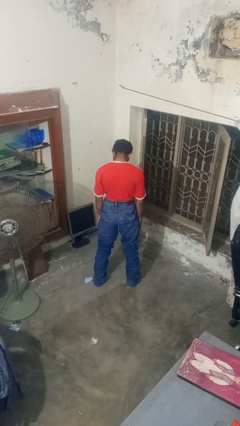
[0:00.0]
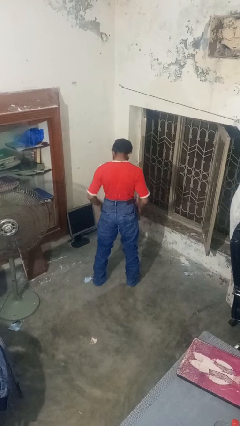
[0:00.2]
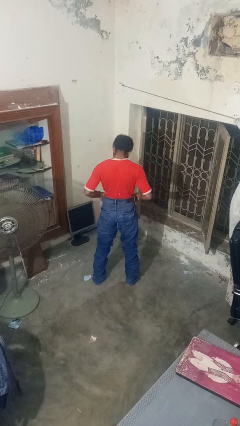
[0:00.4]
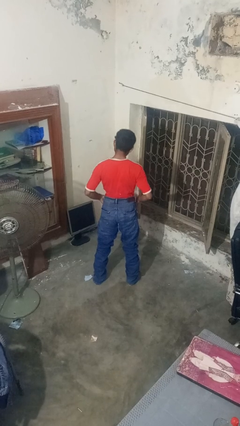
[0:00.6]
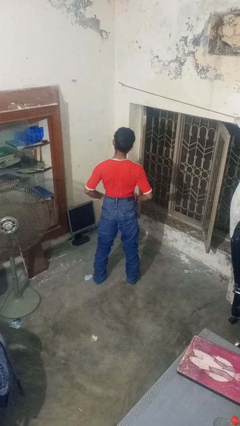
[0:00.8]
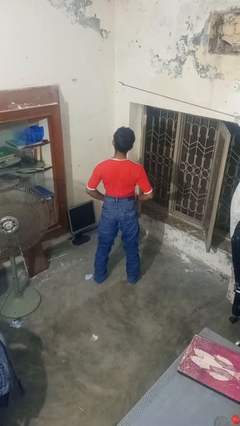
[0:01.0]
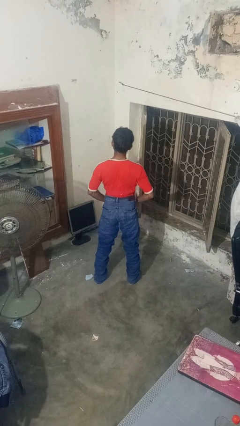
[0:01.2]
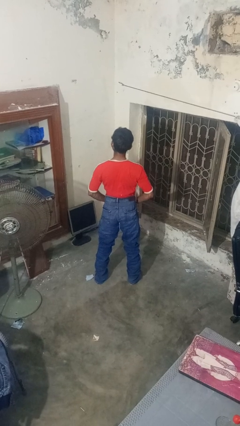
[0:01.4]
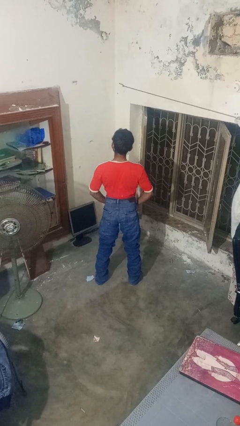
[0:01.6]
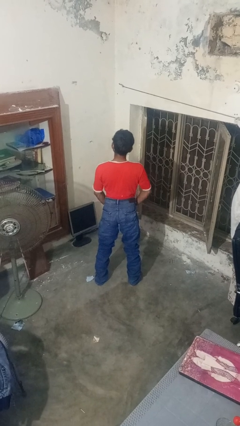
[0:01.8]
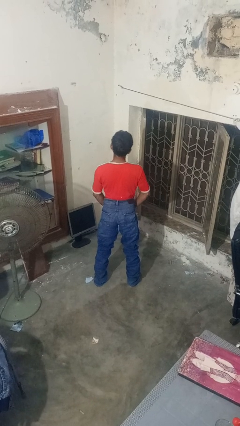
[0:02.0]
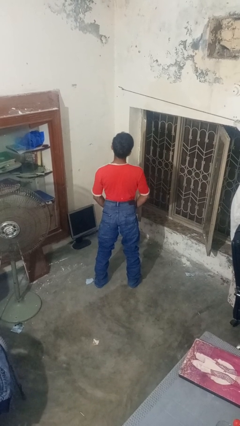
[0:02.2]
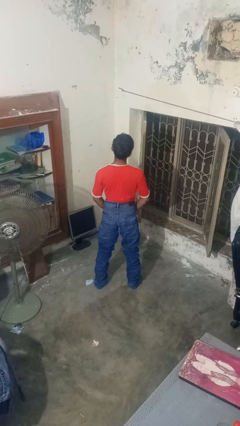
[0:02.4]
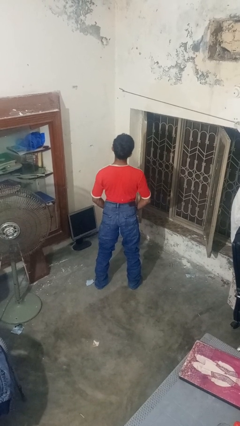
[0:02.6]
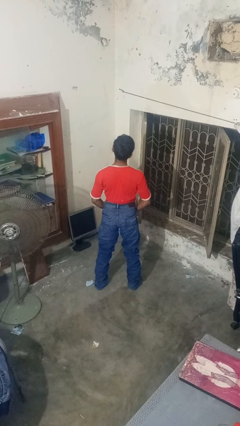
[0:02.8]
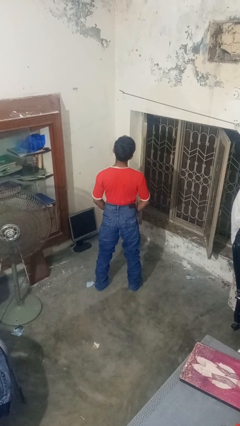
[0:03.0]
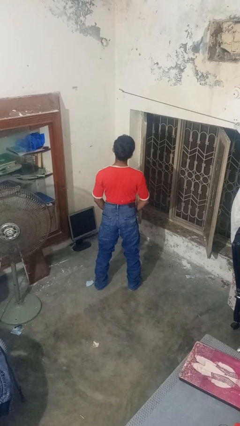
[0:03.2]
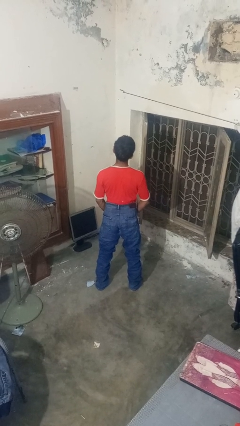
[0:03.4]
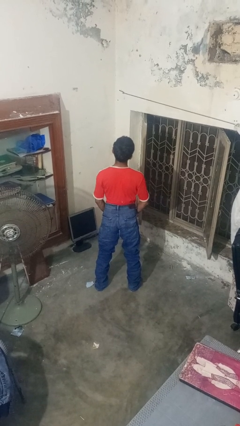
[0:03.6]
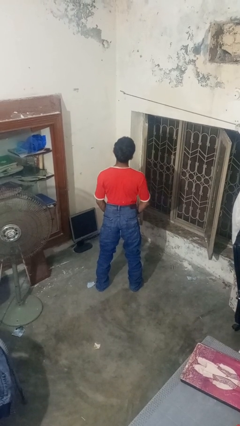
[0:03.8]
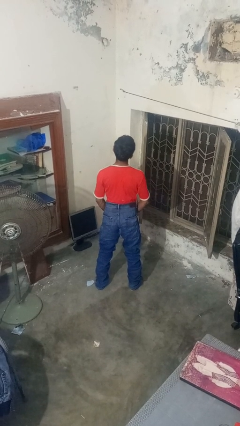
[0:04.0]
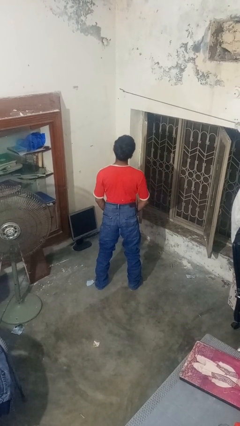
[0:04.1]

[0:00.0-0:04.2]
person puts hands in back pockets

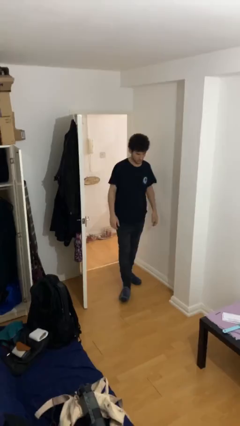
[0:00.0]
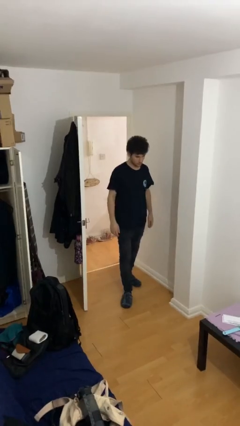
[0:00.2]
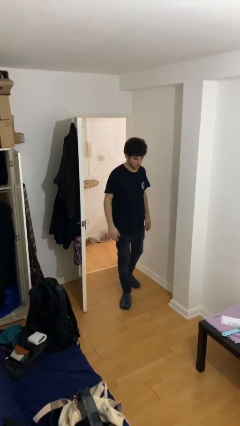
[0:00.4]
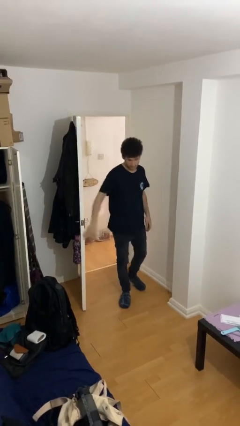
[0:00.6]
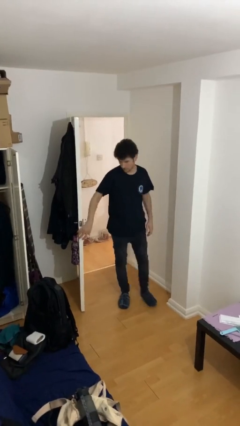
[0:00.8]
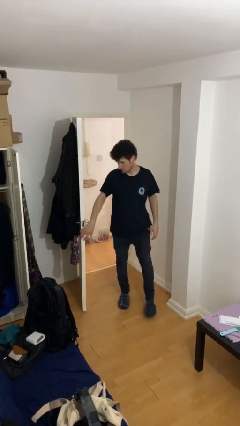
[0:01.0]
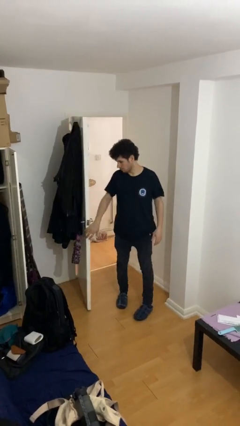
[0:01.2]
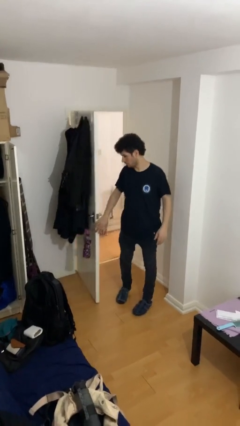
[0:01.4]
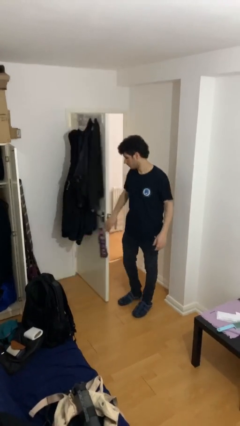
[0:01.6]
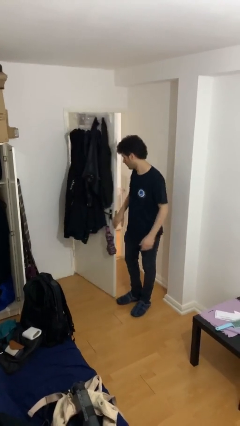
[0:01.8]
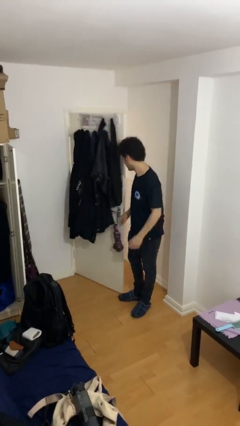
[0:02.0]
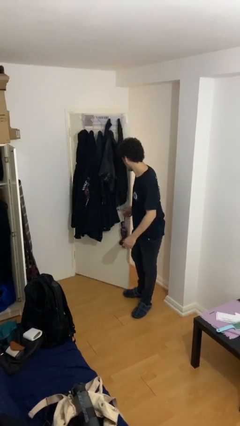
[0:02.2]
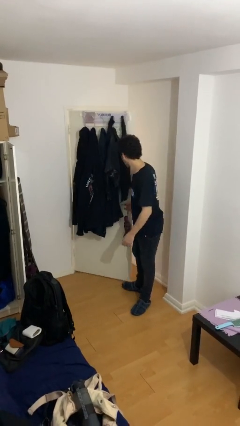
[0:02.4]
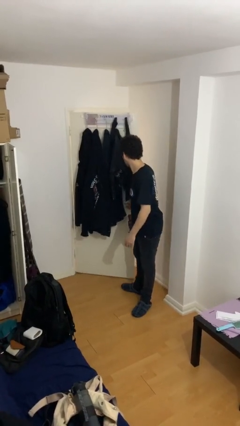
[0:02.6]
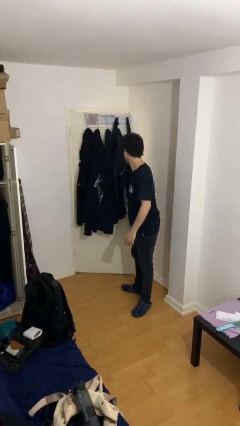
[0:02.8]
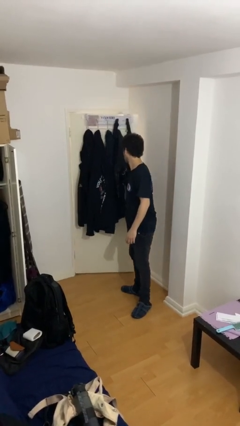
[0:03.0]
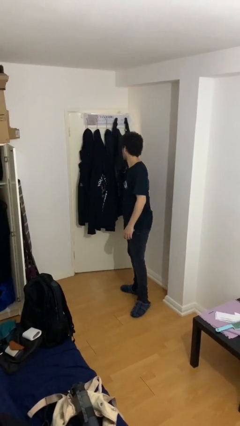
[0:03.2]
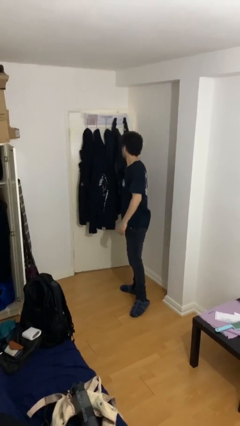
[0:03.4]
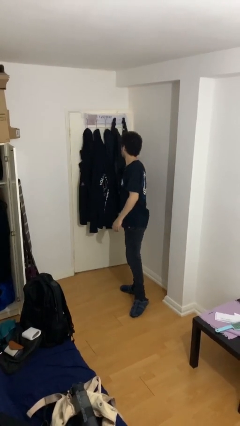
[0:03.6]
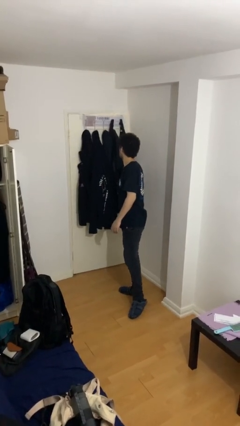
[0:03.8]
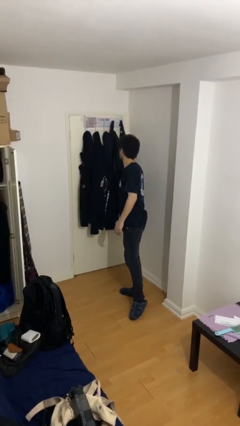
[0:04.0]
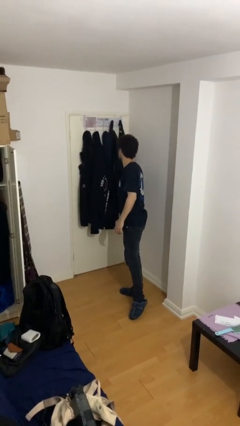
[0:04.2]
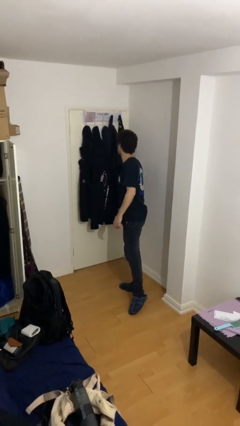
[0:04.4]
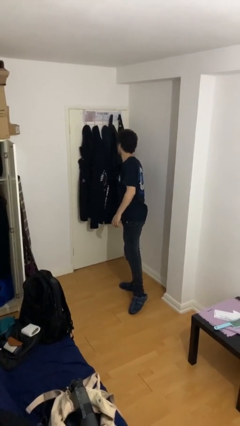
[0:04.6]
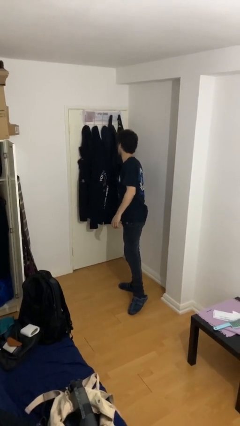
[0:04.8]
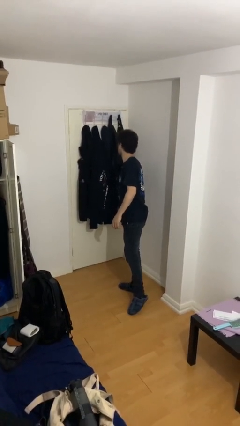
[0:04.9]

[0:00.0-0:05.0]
person closes facility door

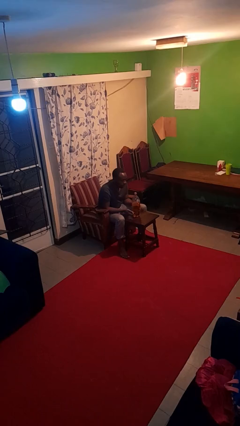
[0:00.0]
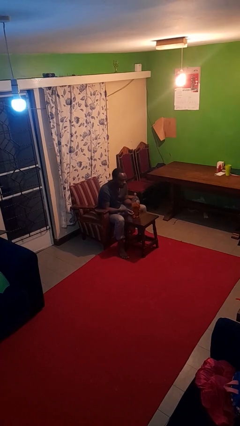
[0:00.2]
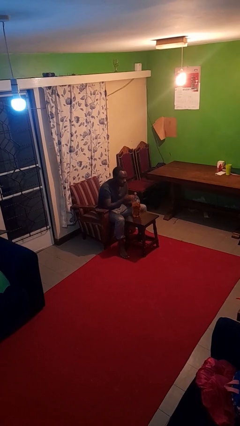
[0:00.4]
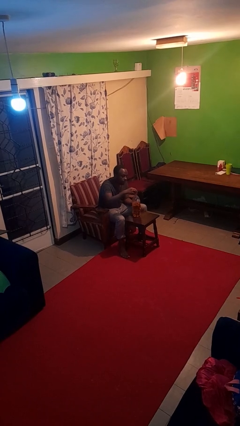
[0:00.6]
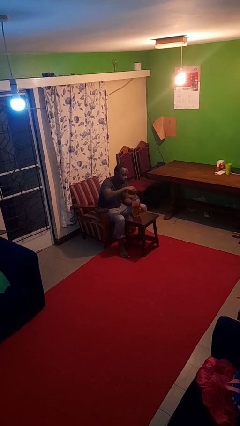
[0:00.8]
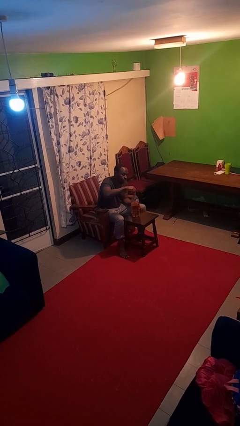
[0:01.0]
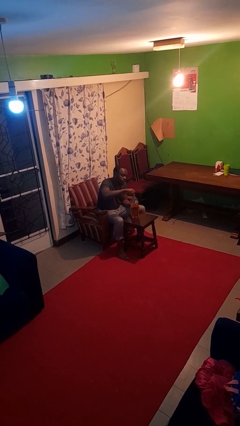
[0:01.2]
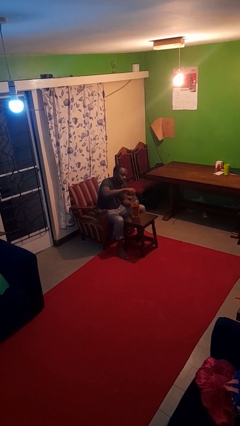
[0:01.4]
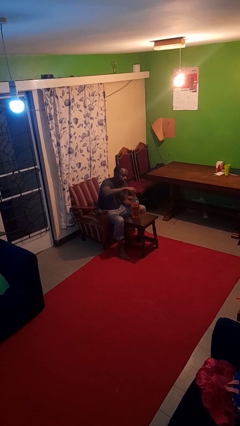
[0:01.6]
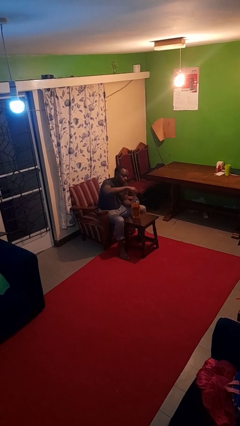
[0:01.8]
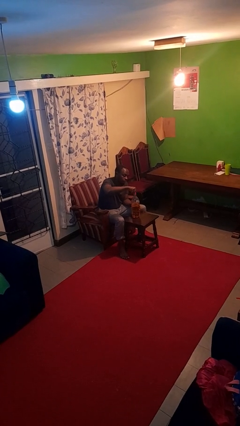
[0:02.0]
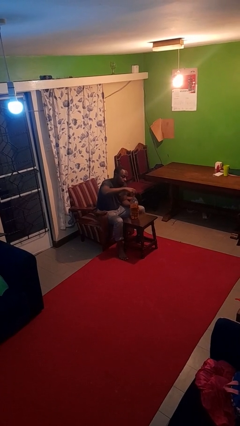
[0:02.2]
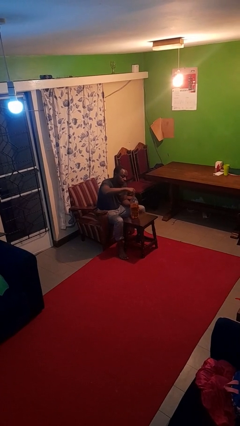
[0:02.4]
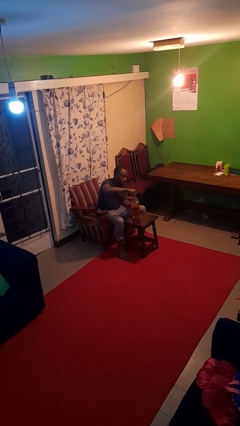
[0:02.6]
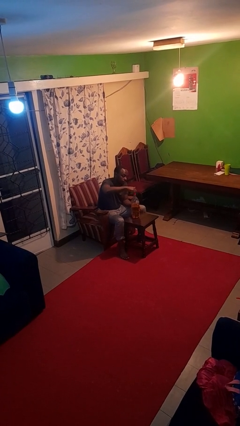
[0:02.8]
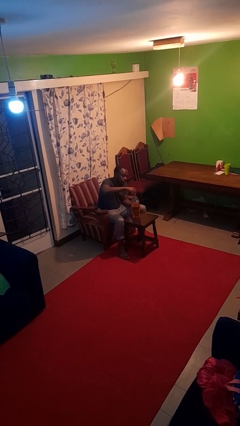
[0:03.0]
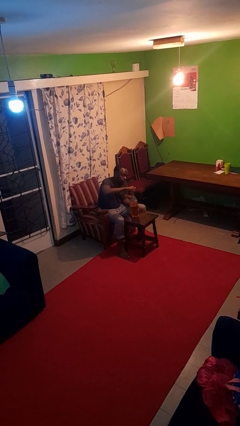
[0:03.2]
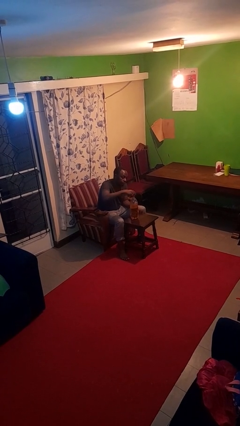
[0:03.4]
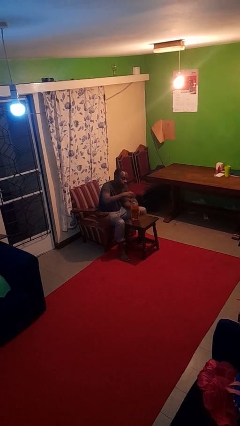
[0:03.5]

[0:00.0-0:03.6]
person screws lid to bottle

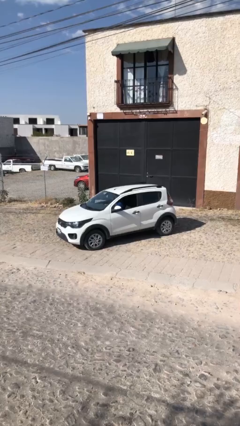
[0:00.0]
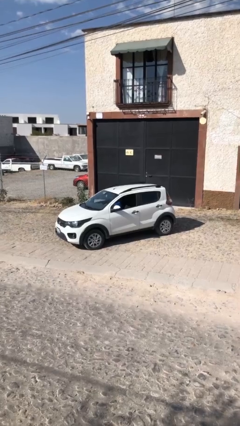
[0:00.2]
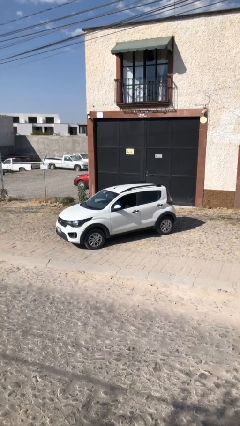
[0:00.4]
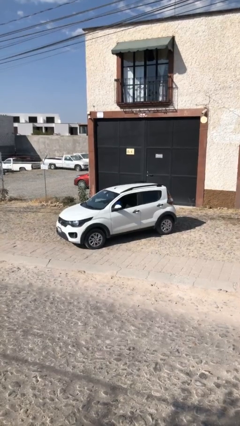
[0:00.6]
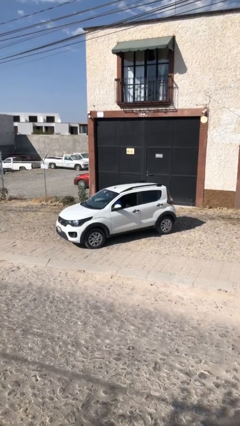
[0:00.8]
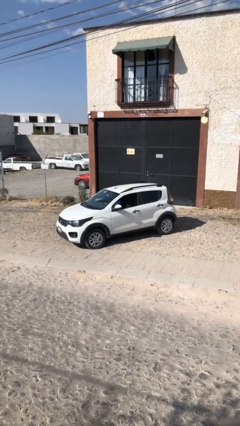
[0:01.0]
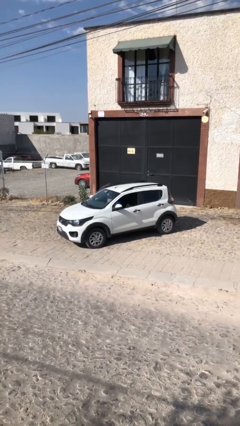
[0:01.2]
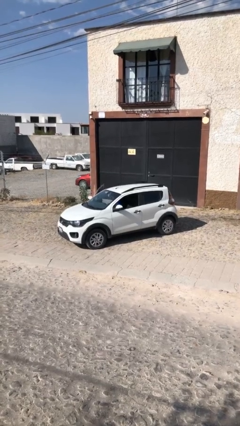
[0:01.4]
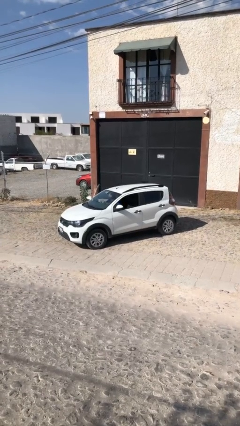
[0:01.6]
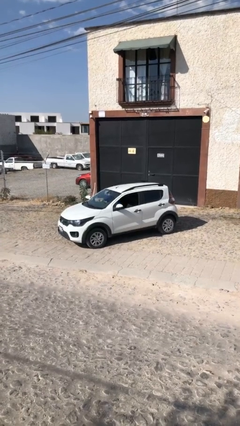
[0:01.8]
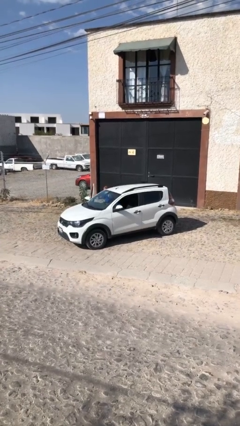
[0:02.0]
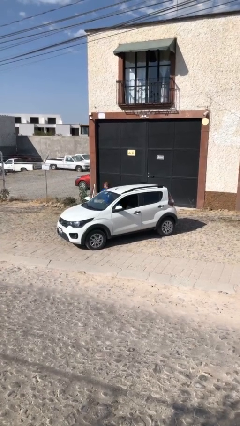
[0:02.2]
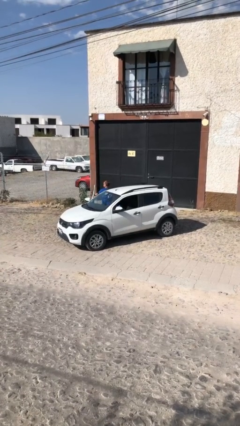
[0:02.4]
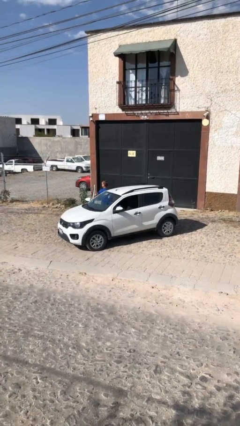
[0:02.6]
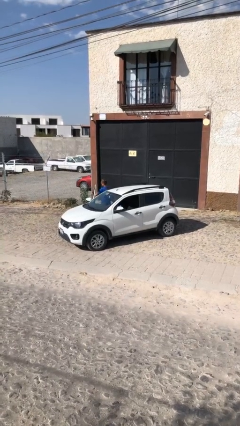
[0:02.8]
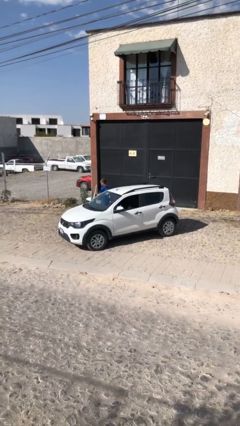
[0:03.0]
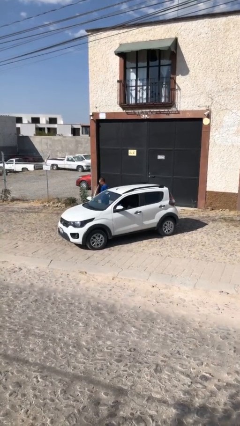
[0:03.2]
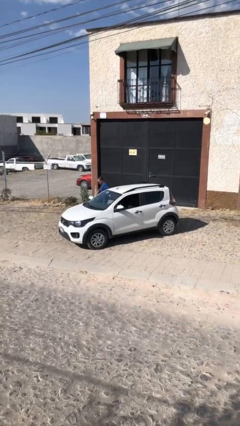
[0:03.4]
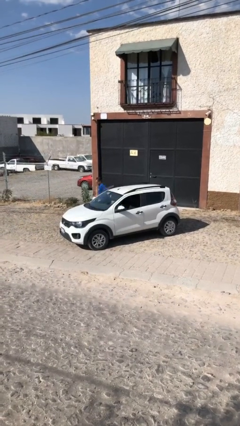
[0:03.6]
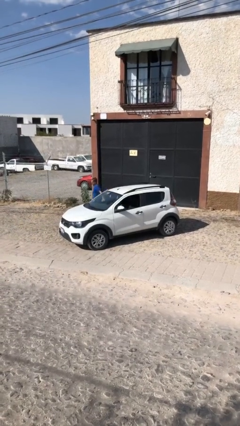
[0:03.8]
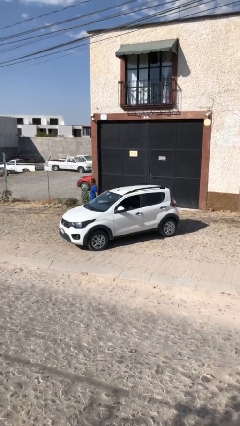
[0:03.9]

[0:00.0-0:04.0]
car drops off person

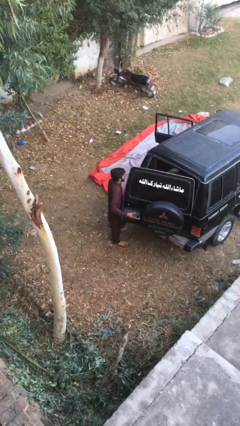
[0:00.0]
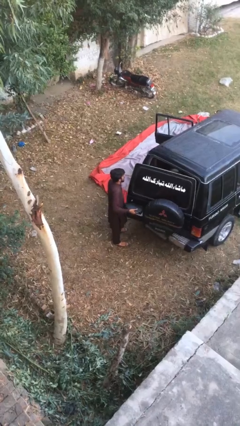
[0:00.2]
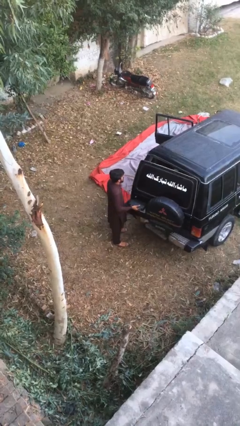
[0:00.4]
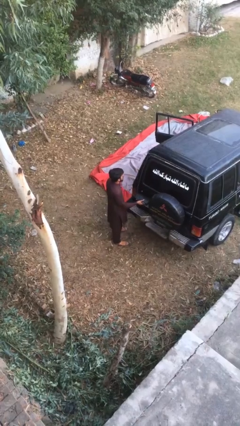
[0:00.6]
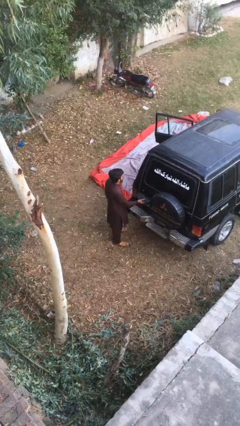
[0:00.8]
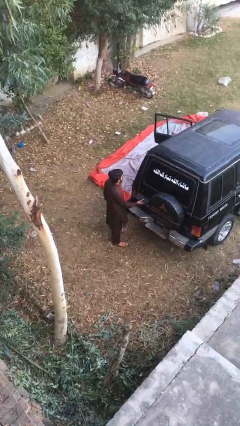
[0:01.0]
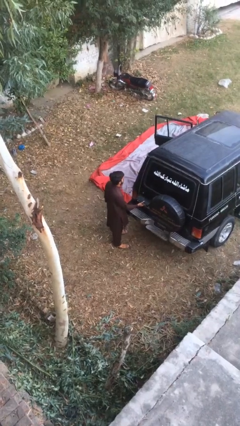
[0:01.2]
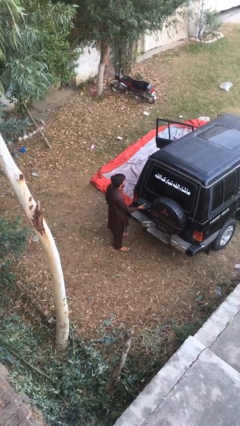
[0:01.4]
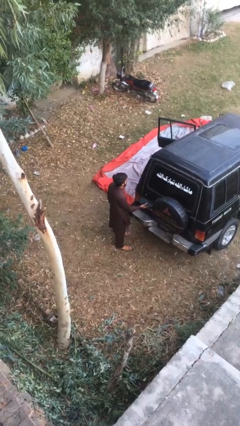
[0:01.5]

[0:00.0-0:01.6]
person closes car trunk
